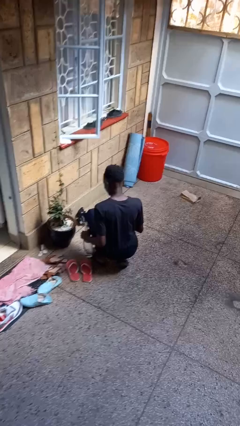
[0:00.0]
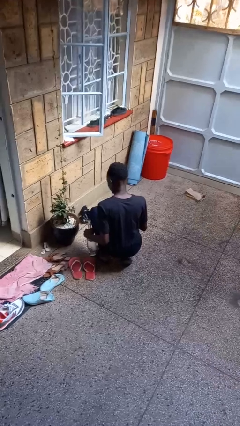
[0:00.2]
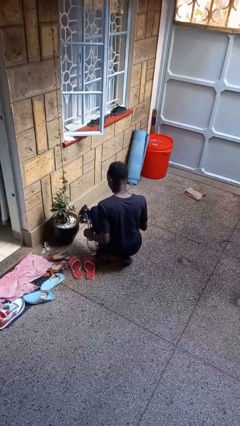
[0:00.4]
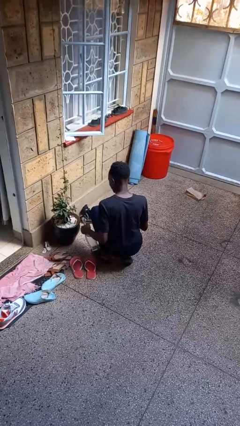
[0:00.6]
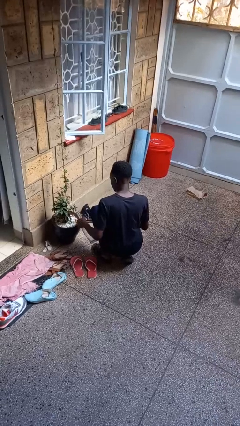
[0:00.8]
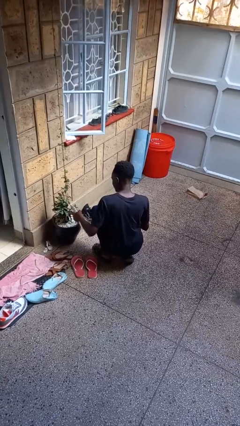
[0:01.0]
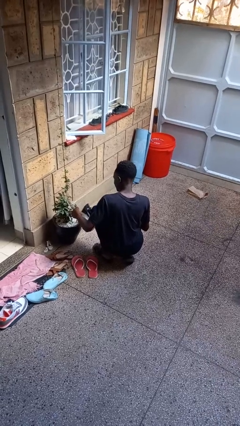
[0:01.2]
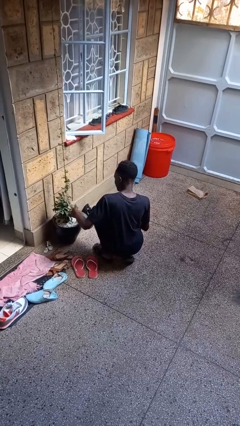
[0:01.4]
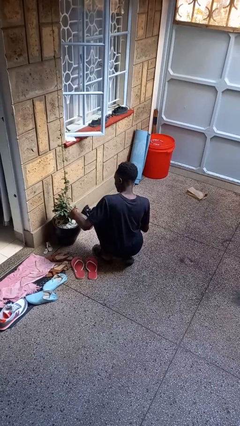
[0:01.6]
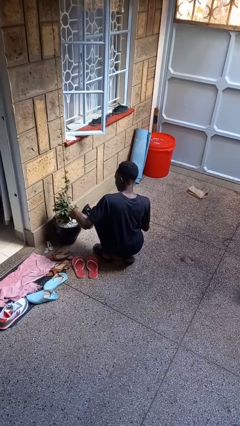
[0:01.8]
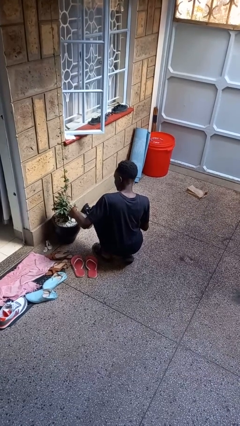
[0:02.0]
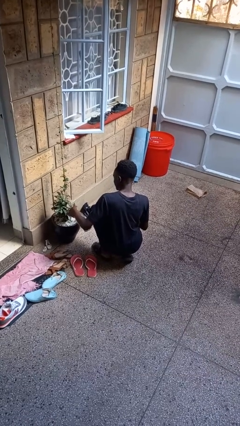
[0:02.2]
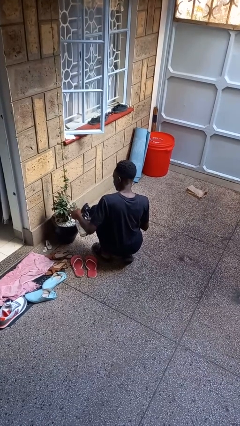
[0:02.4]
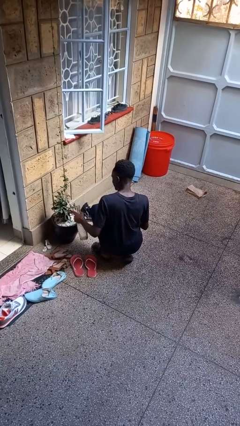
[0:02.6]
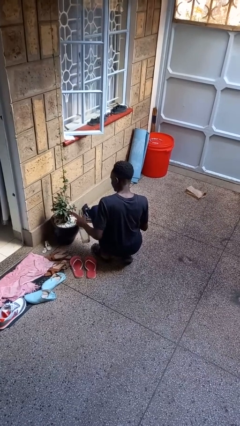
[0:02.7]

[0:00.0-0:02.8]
person waters houseplant

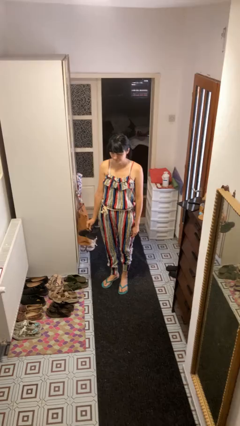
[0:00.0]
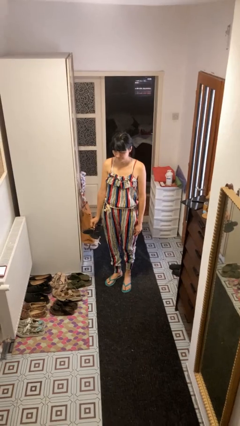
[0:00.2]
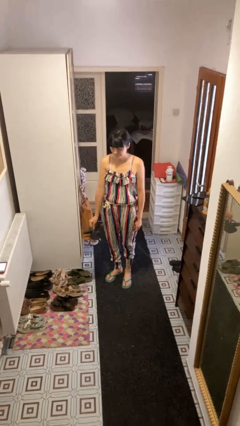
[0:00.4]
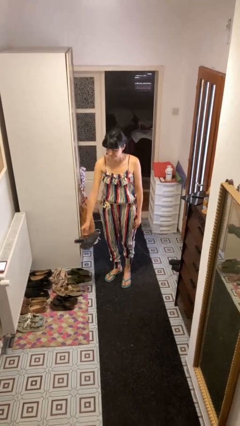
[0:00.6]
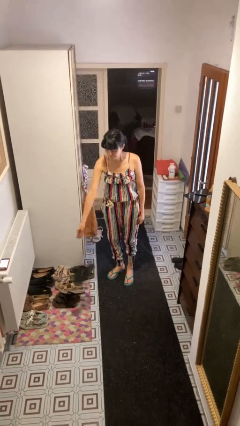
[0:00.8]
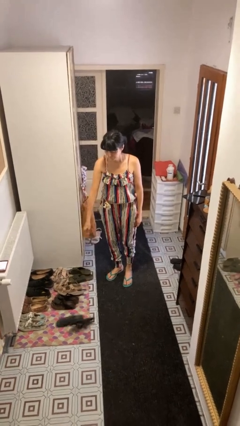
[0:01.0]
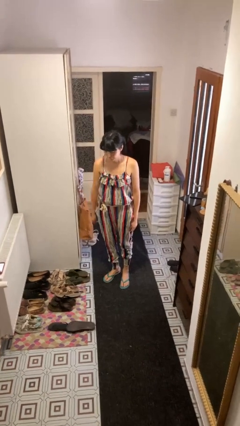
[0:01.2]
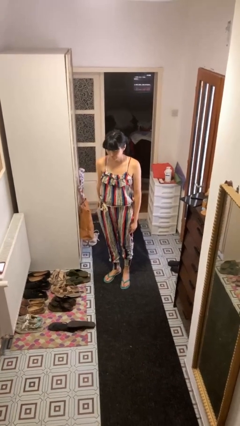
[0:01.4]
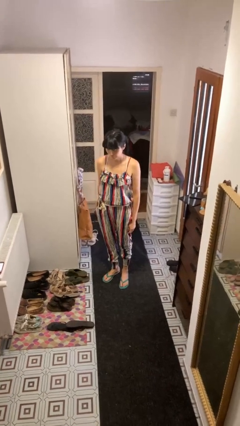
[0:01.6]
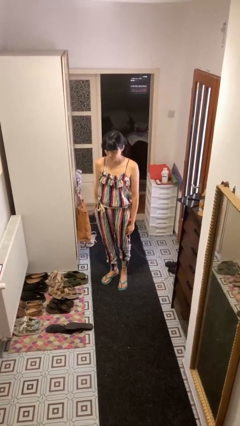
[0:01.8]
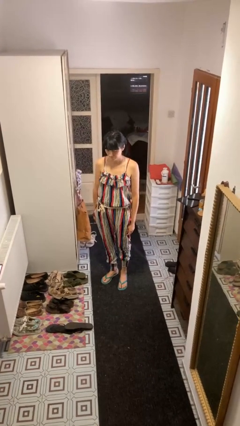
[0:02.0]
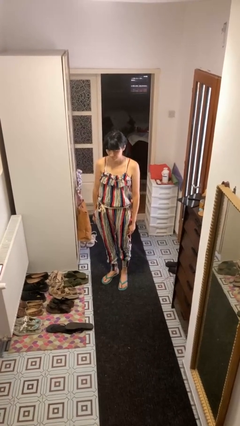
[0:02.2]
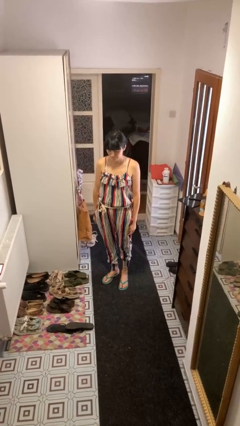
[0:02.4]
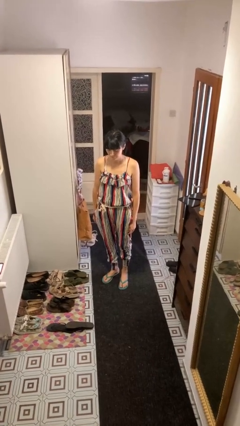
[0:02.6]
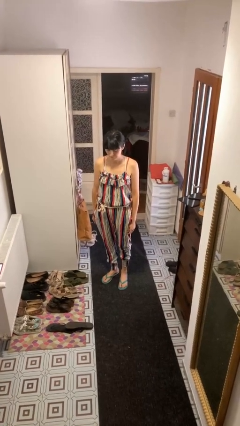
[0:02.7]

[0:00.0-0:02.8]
person throws object to ground

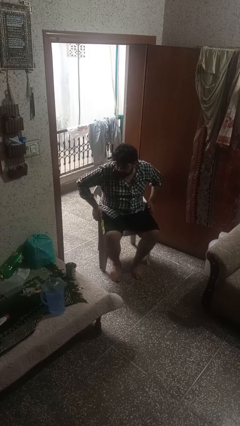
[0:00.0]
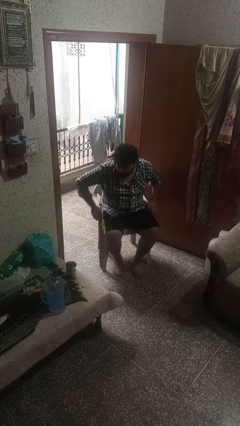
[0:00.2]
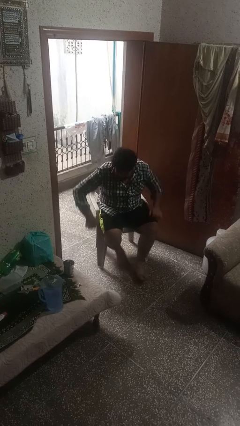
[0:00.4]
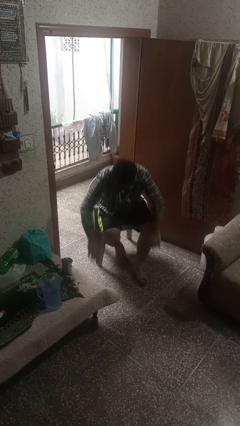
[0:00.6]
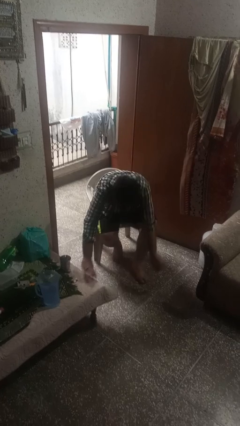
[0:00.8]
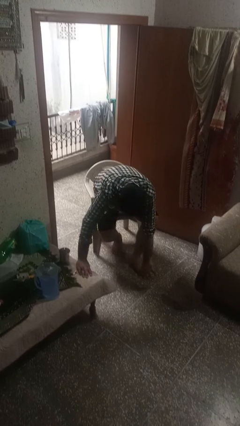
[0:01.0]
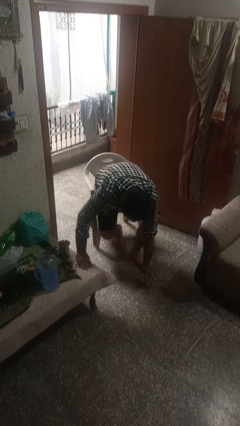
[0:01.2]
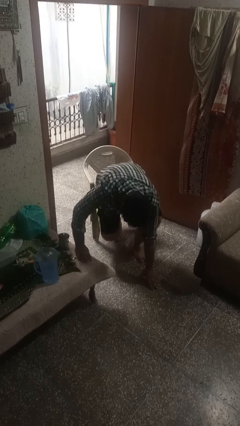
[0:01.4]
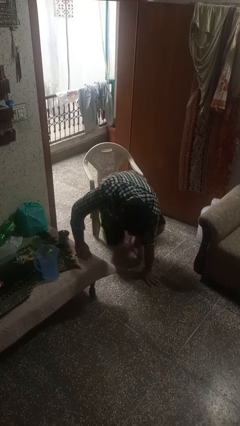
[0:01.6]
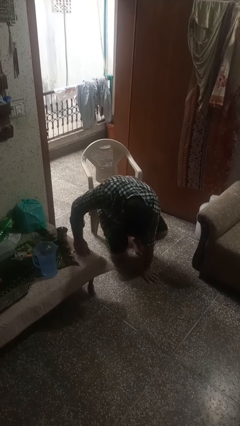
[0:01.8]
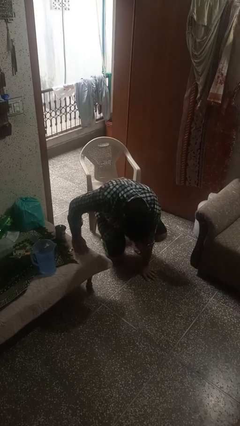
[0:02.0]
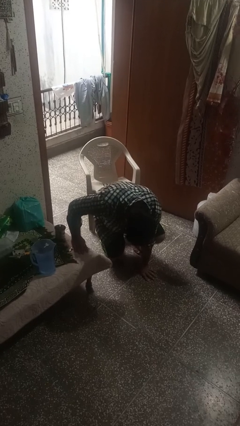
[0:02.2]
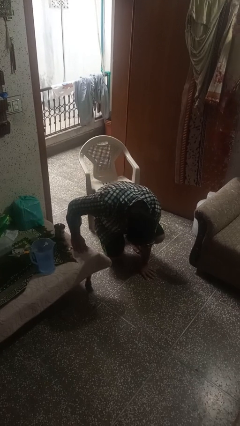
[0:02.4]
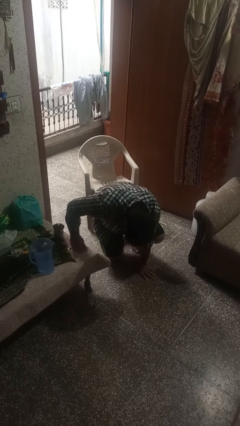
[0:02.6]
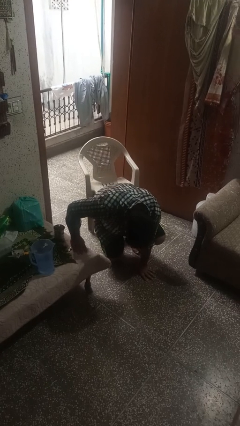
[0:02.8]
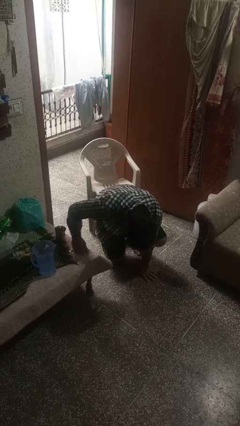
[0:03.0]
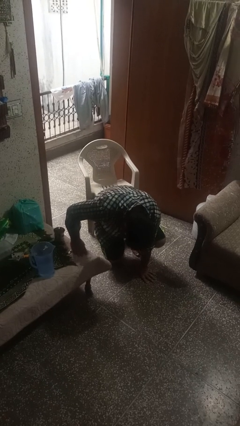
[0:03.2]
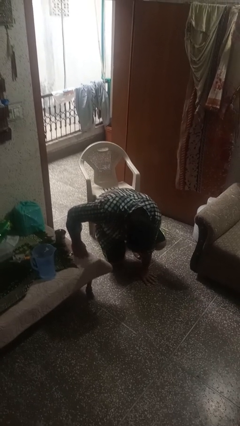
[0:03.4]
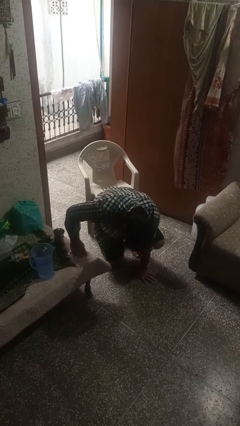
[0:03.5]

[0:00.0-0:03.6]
person falls from chair

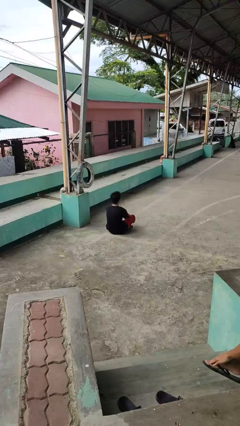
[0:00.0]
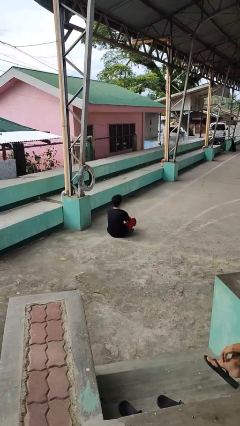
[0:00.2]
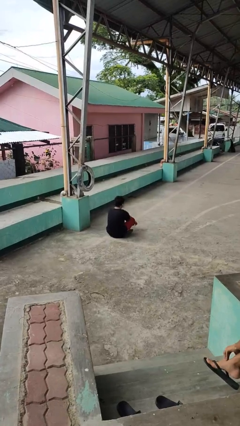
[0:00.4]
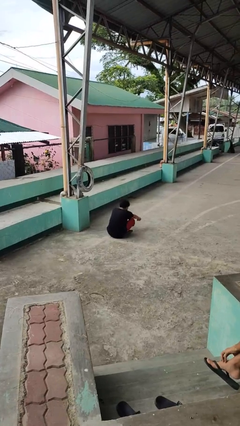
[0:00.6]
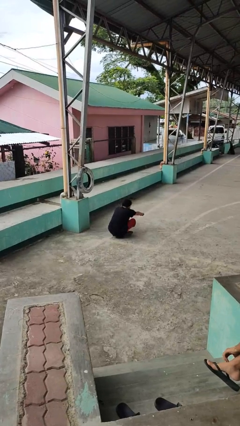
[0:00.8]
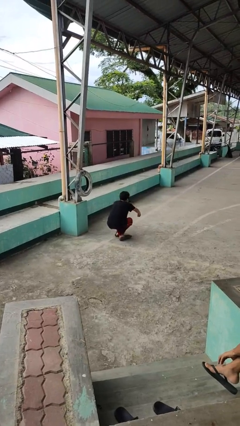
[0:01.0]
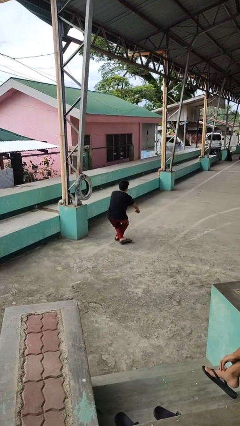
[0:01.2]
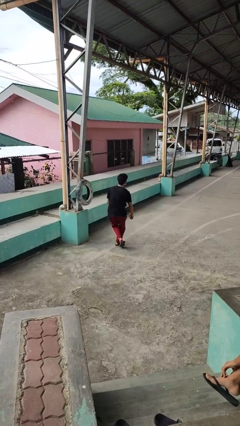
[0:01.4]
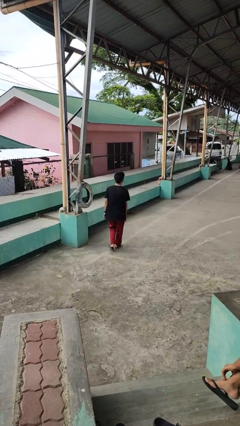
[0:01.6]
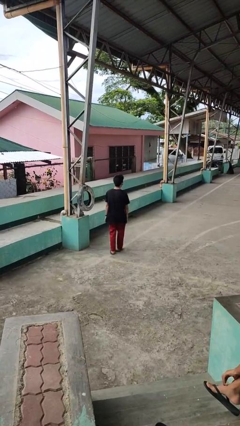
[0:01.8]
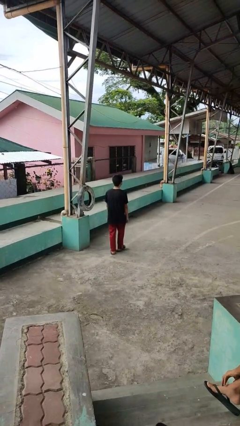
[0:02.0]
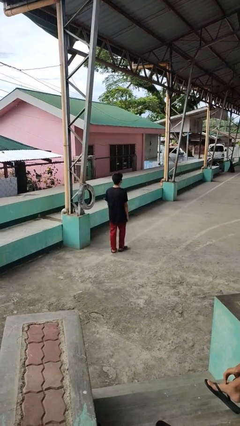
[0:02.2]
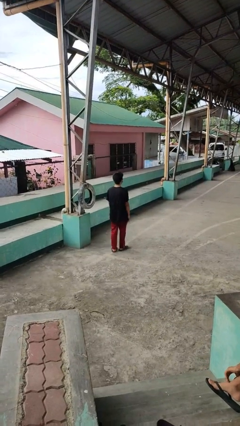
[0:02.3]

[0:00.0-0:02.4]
person stands up from floor

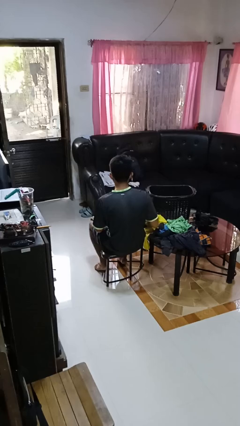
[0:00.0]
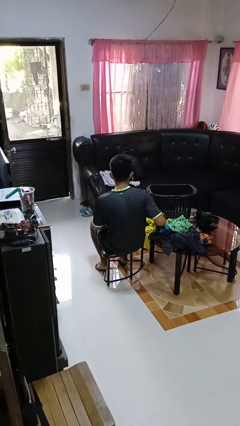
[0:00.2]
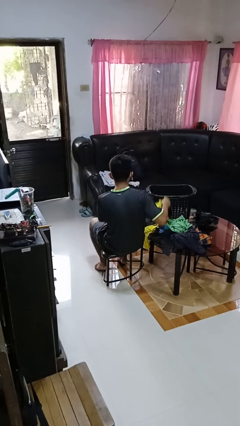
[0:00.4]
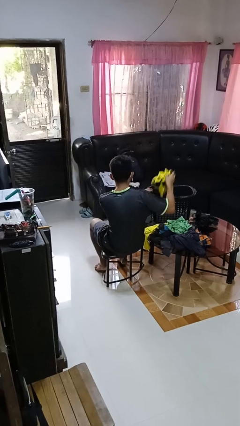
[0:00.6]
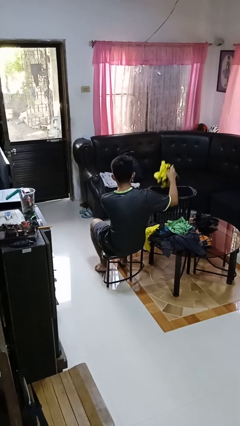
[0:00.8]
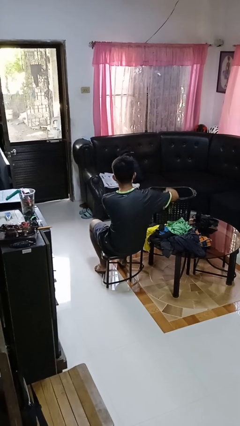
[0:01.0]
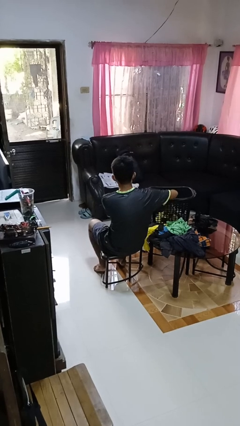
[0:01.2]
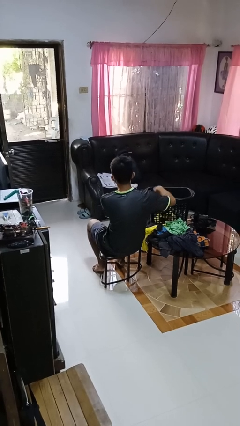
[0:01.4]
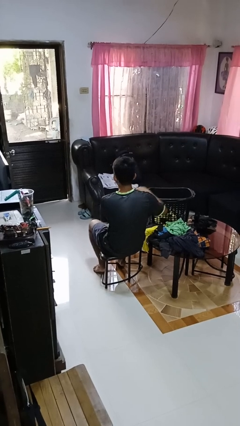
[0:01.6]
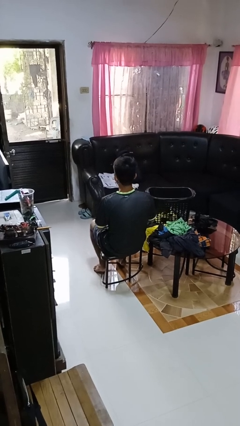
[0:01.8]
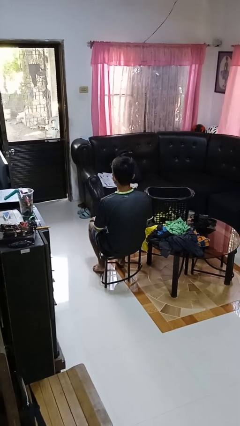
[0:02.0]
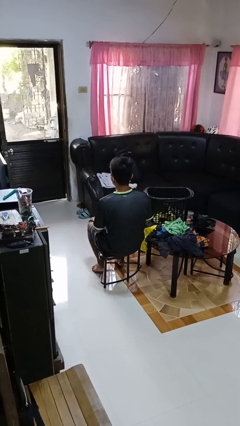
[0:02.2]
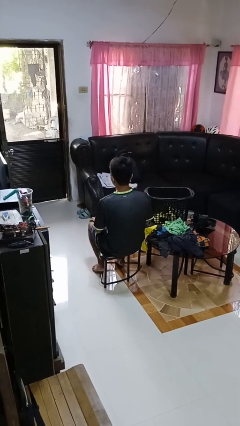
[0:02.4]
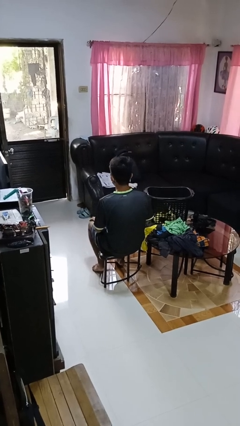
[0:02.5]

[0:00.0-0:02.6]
person puts object into basket

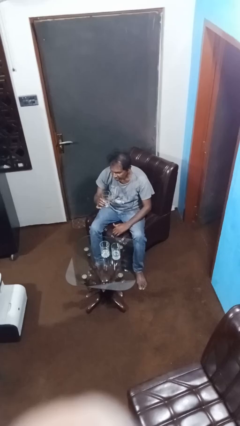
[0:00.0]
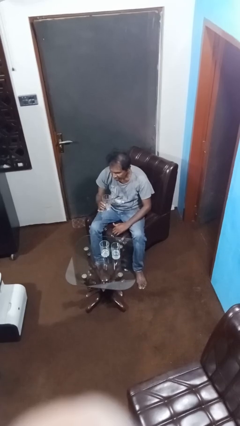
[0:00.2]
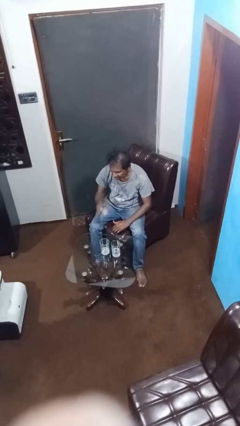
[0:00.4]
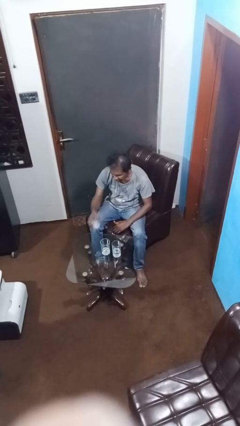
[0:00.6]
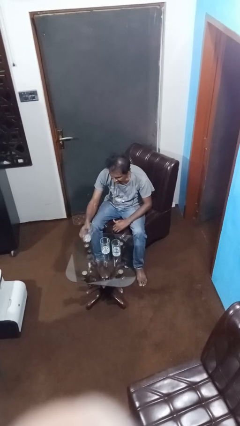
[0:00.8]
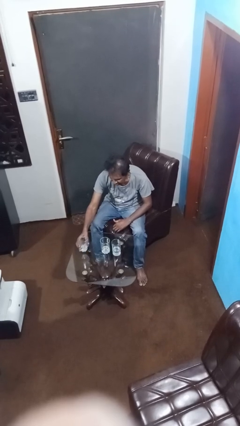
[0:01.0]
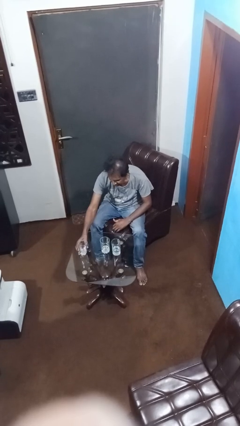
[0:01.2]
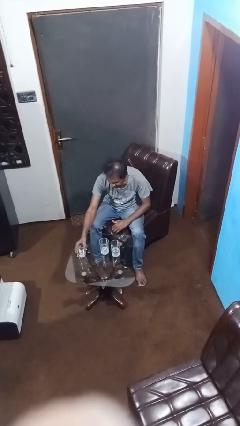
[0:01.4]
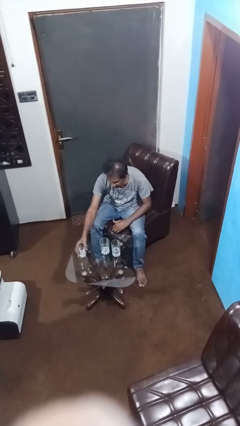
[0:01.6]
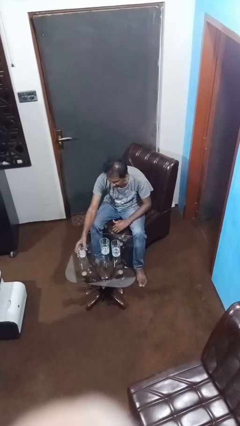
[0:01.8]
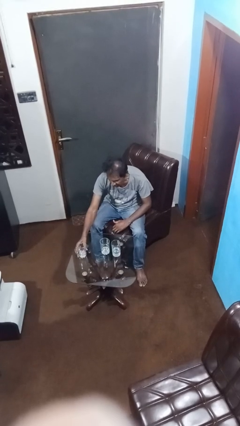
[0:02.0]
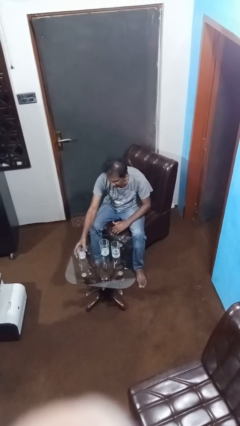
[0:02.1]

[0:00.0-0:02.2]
person puts down object on table

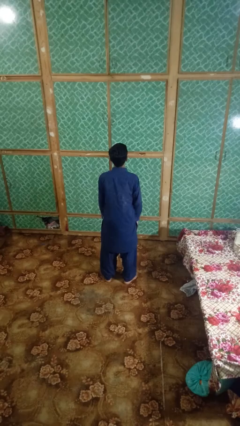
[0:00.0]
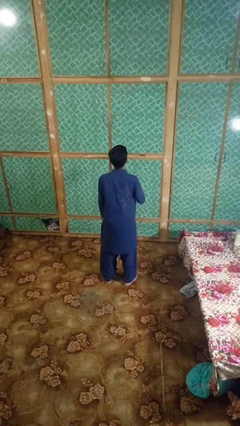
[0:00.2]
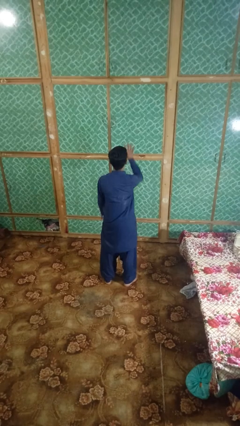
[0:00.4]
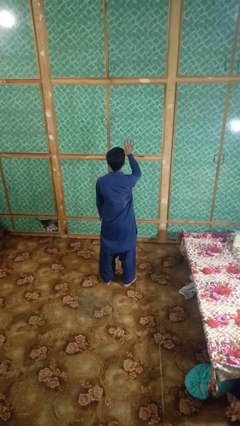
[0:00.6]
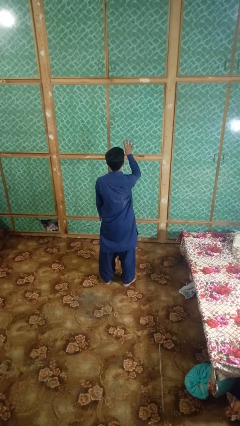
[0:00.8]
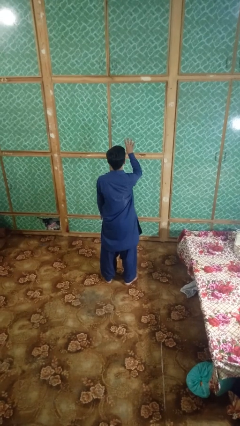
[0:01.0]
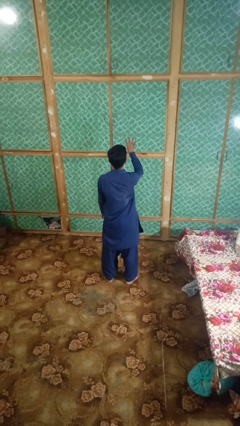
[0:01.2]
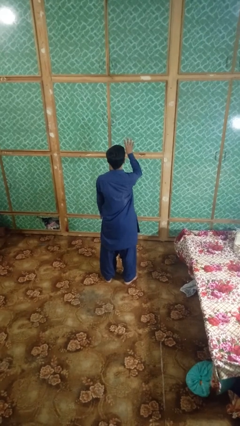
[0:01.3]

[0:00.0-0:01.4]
person gestures number four
